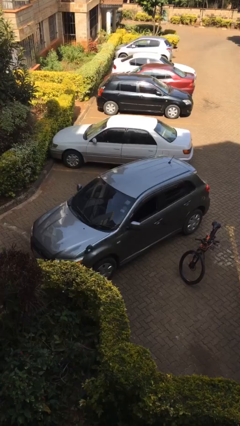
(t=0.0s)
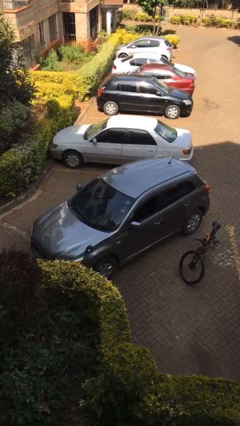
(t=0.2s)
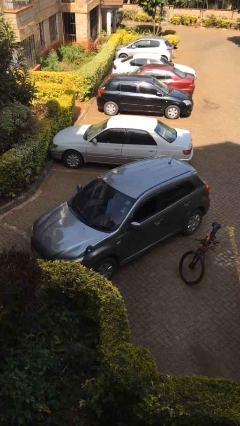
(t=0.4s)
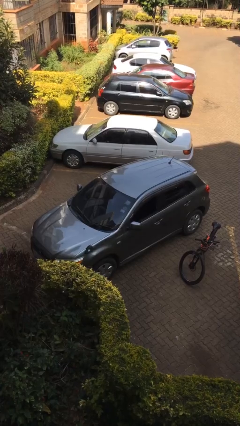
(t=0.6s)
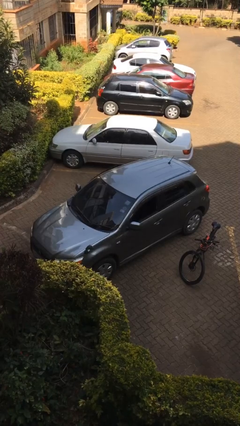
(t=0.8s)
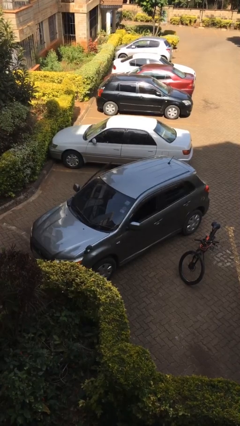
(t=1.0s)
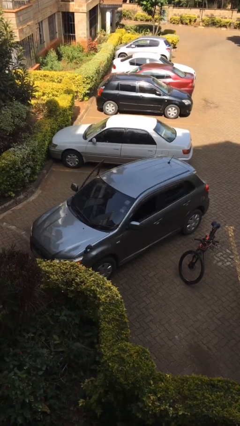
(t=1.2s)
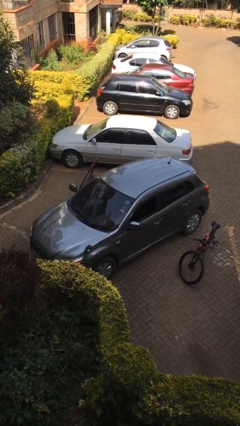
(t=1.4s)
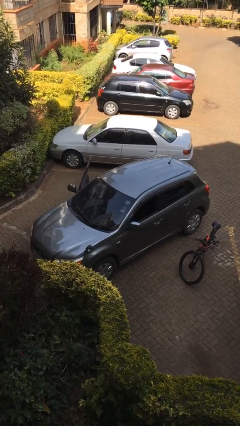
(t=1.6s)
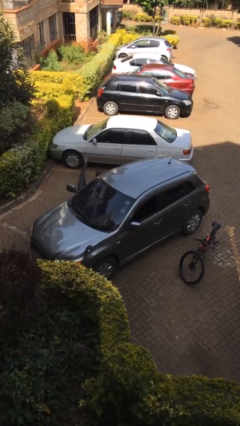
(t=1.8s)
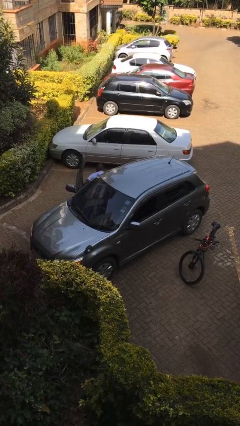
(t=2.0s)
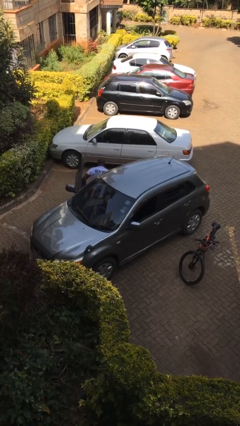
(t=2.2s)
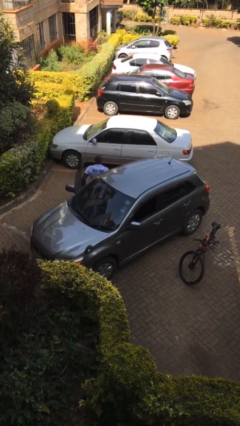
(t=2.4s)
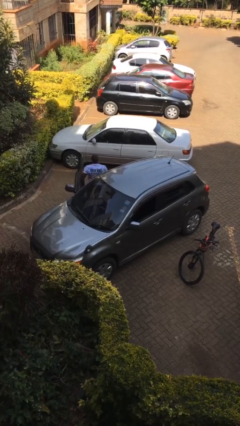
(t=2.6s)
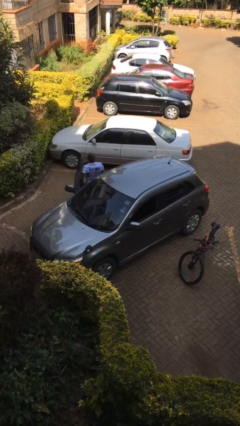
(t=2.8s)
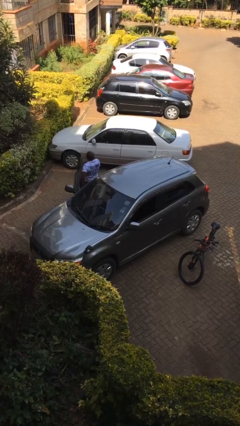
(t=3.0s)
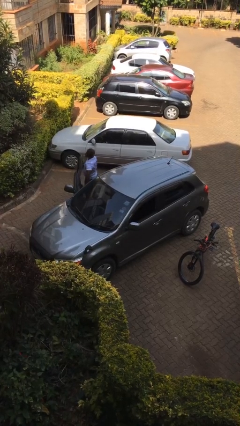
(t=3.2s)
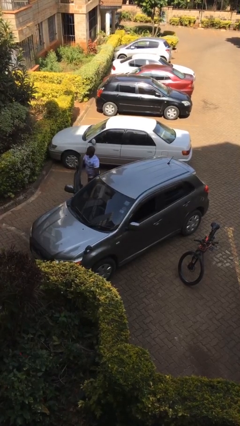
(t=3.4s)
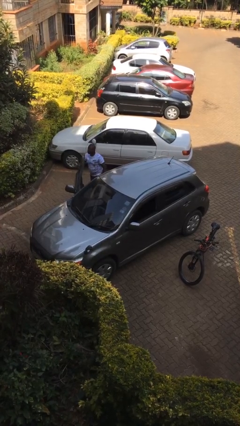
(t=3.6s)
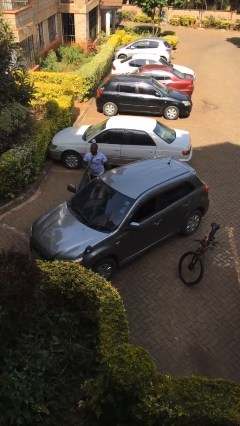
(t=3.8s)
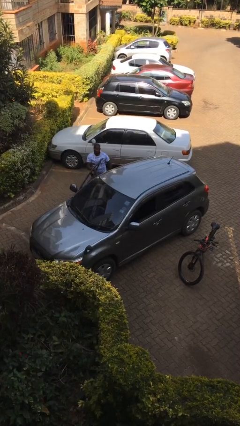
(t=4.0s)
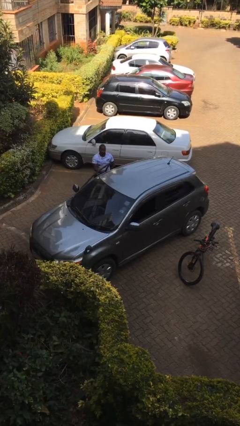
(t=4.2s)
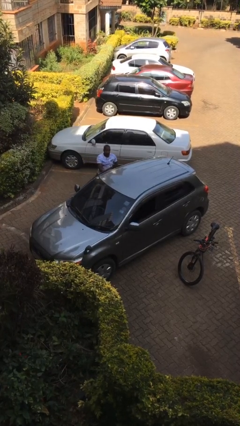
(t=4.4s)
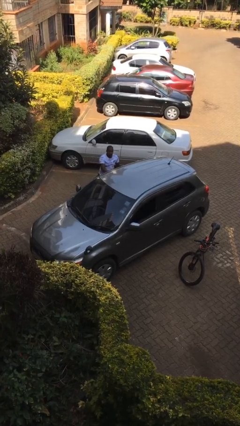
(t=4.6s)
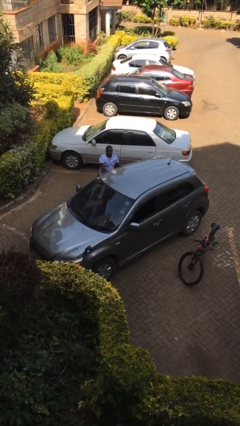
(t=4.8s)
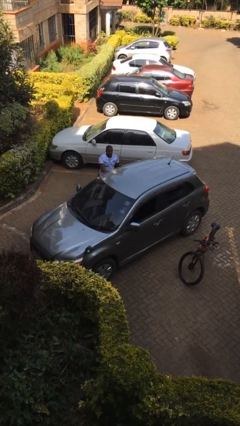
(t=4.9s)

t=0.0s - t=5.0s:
car drops off person

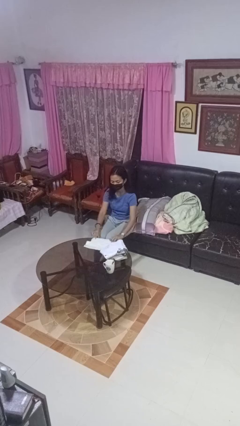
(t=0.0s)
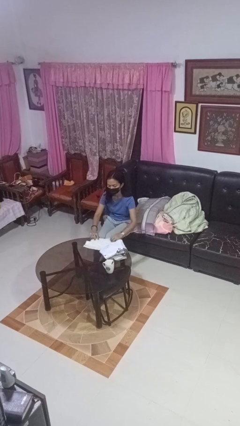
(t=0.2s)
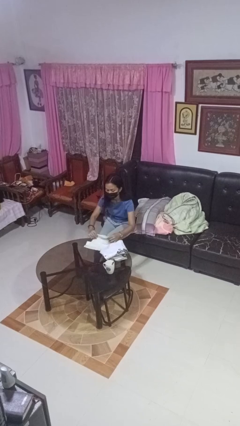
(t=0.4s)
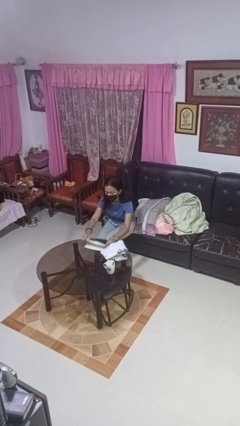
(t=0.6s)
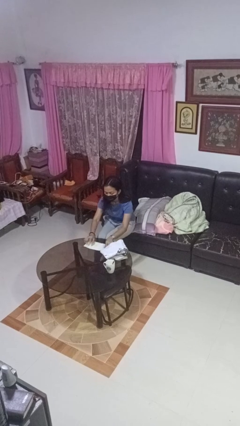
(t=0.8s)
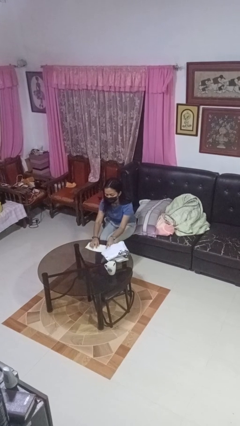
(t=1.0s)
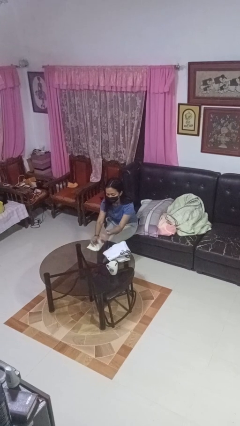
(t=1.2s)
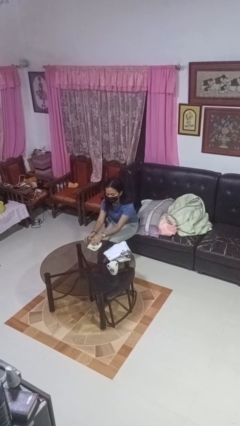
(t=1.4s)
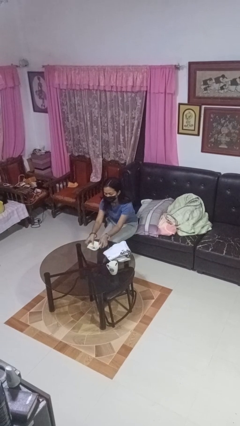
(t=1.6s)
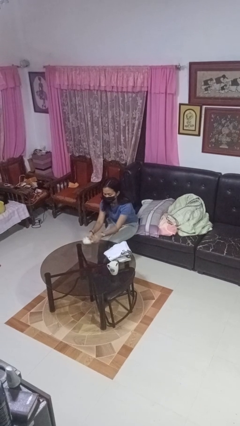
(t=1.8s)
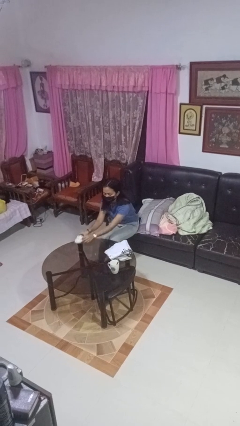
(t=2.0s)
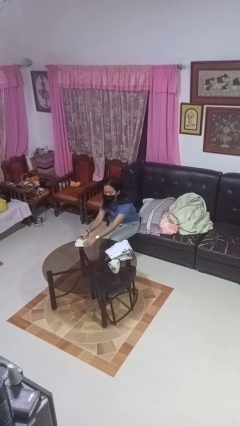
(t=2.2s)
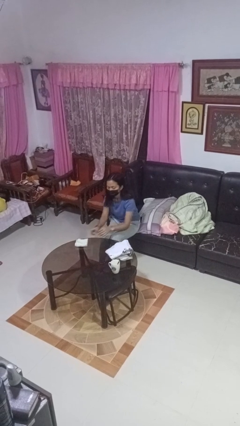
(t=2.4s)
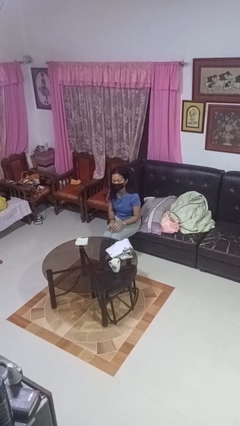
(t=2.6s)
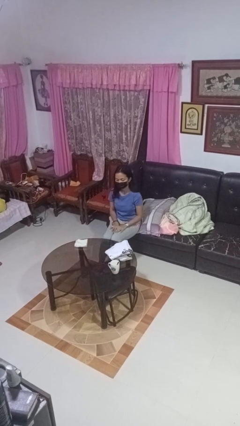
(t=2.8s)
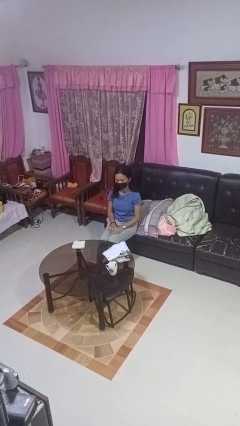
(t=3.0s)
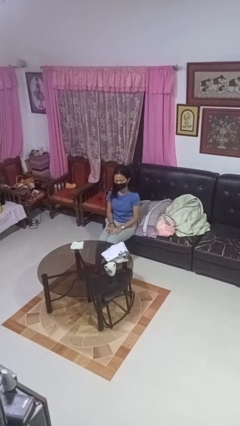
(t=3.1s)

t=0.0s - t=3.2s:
person folds towel

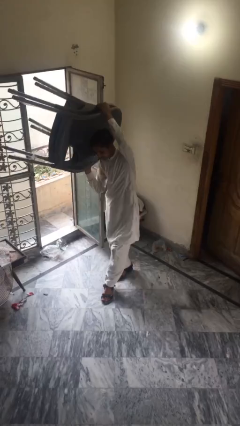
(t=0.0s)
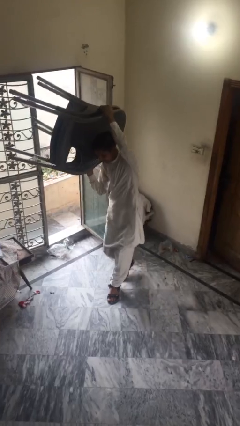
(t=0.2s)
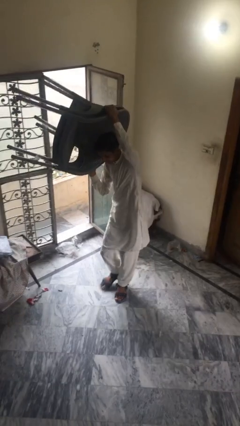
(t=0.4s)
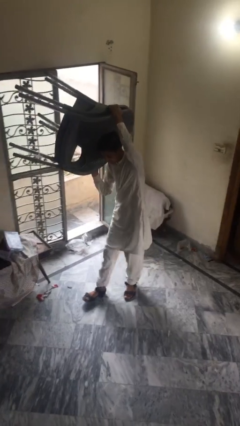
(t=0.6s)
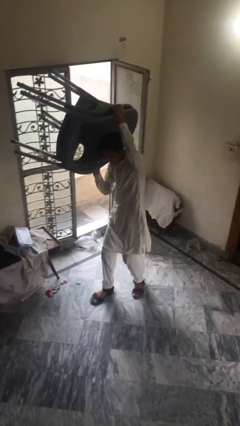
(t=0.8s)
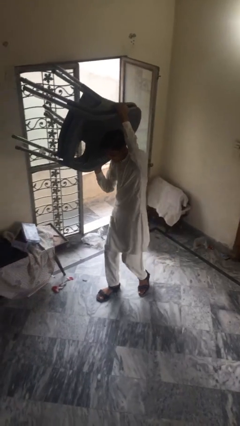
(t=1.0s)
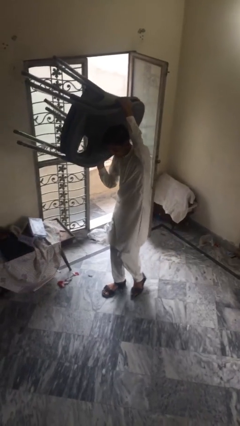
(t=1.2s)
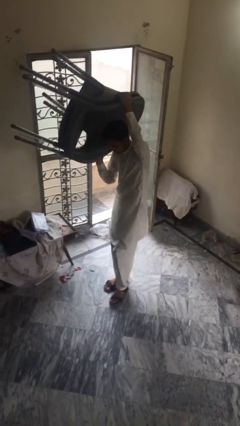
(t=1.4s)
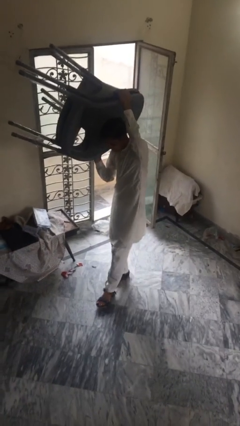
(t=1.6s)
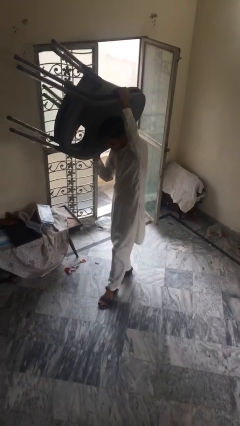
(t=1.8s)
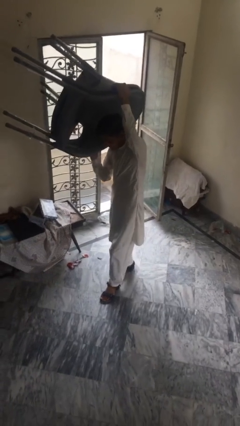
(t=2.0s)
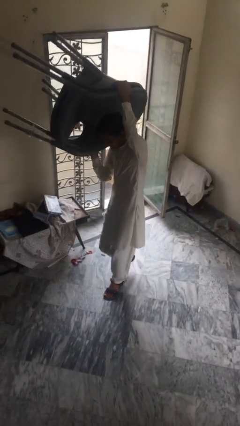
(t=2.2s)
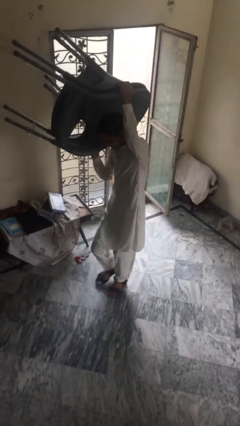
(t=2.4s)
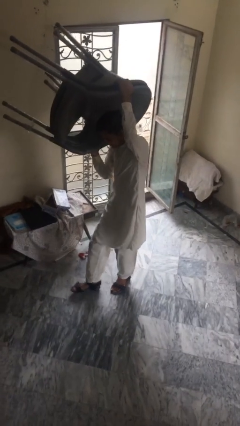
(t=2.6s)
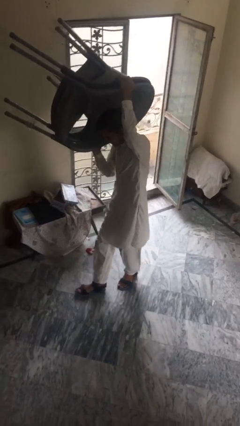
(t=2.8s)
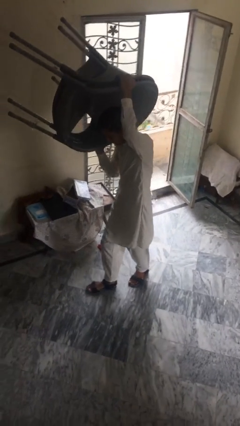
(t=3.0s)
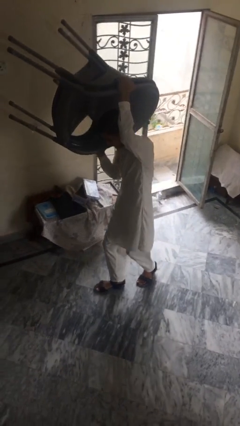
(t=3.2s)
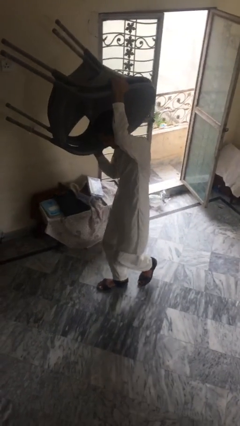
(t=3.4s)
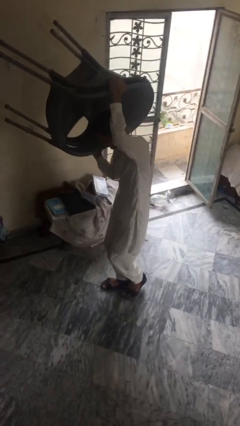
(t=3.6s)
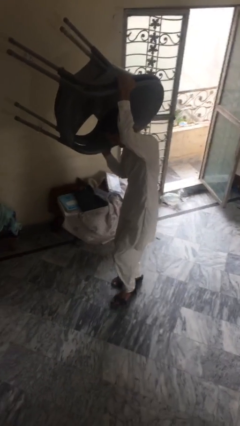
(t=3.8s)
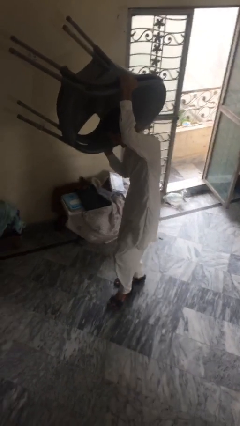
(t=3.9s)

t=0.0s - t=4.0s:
person carries heavy object

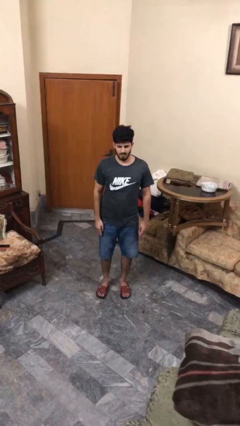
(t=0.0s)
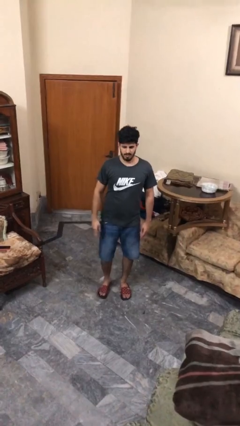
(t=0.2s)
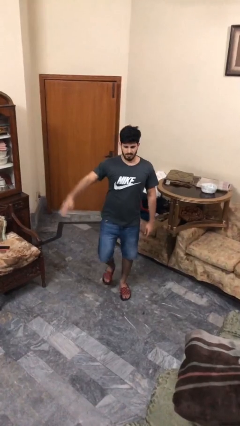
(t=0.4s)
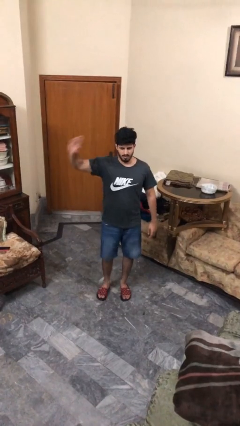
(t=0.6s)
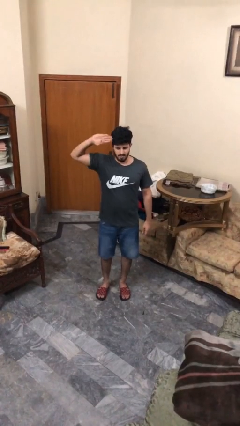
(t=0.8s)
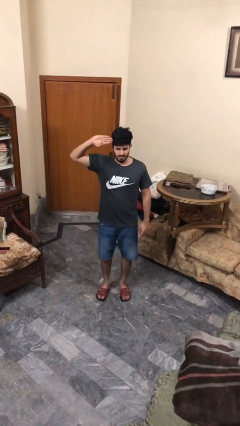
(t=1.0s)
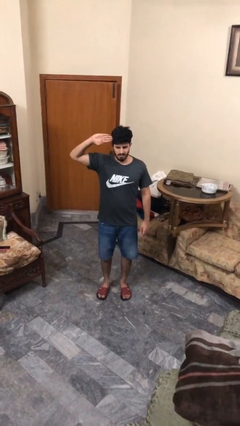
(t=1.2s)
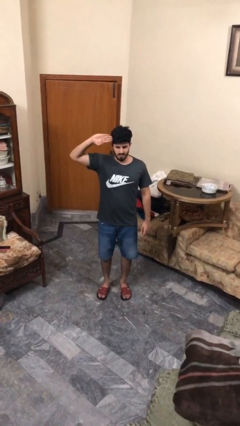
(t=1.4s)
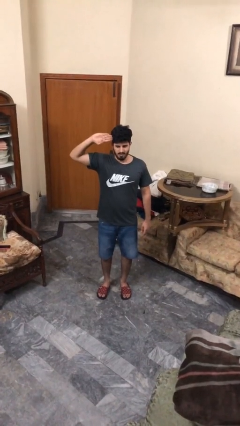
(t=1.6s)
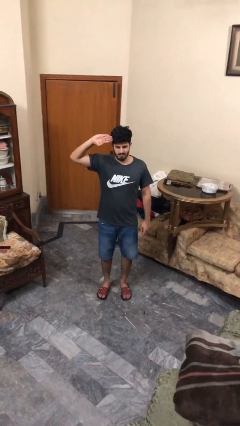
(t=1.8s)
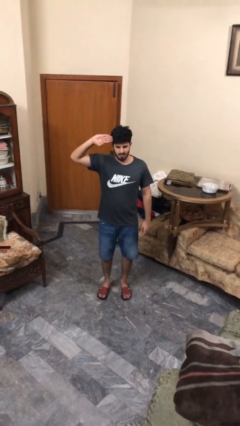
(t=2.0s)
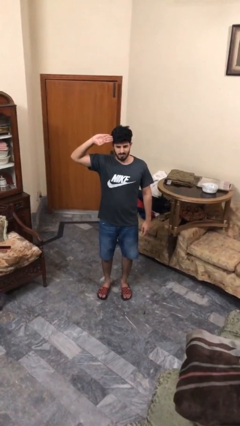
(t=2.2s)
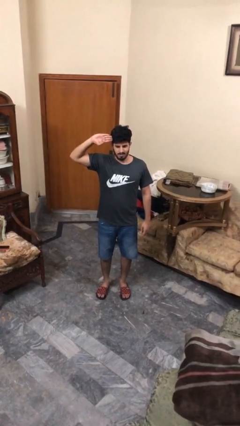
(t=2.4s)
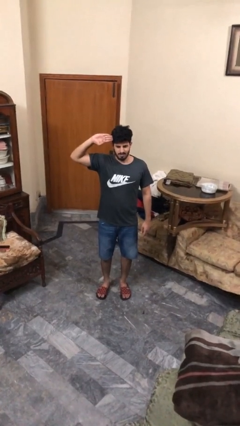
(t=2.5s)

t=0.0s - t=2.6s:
person salutes

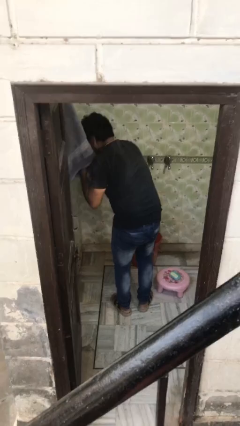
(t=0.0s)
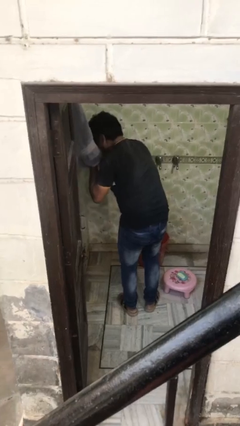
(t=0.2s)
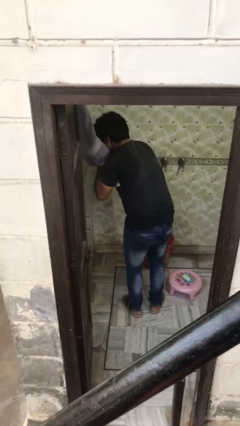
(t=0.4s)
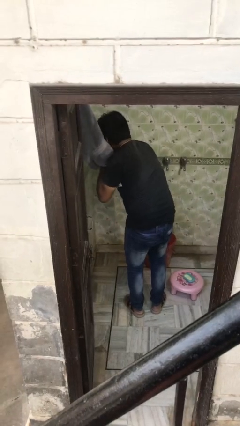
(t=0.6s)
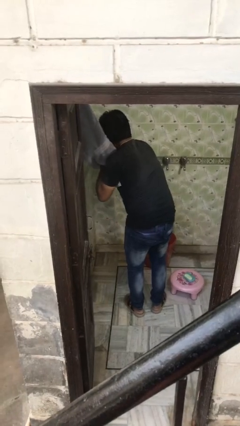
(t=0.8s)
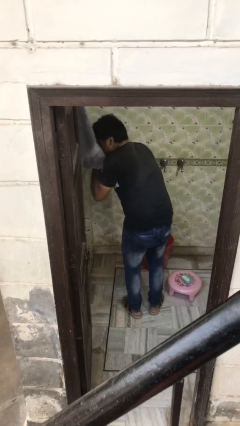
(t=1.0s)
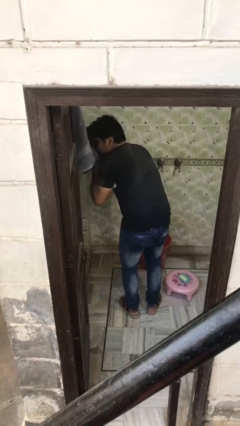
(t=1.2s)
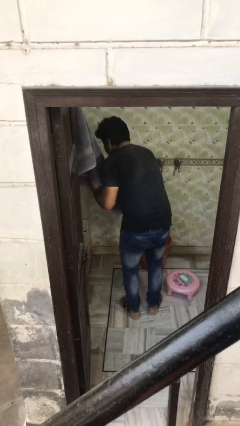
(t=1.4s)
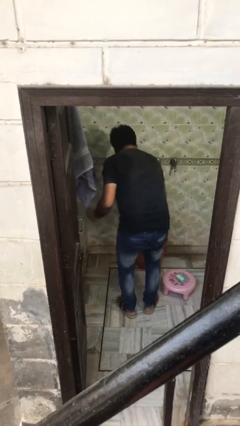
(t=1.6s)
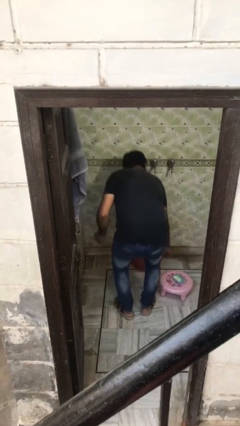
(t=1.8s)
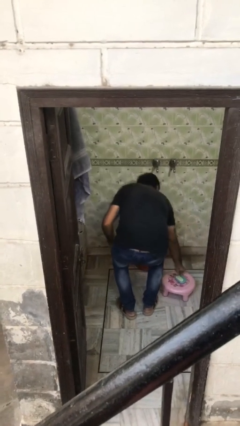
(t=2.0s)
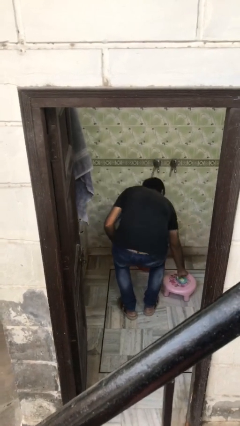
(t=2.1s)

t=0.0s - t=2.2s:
person dries face with towel
